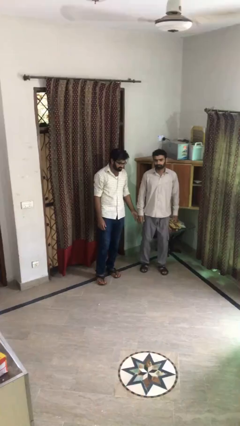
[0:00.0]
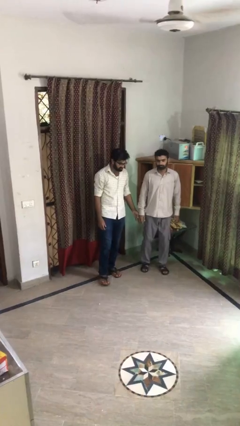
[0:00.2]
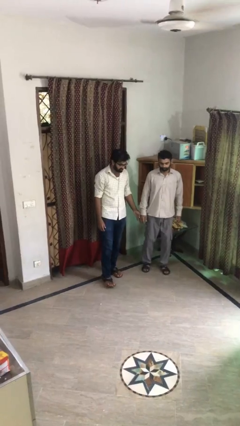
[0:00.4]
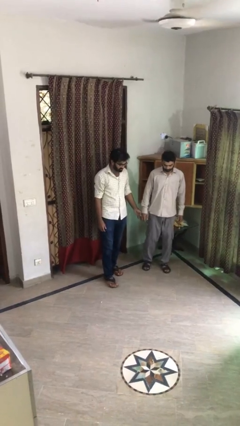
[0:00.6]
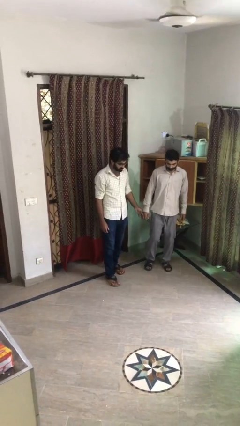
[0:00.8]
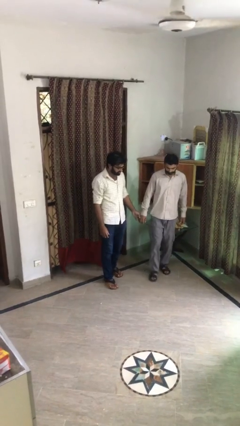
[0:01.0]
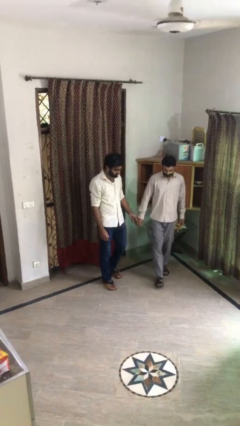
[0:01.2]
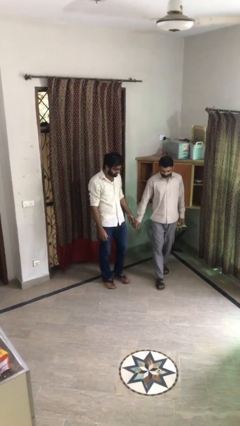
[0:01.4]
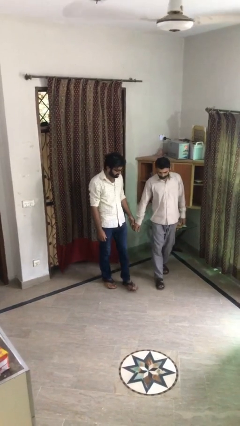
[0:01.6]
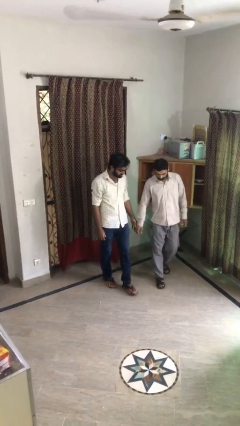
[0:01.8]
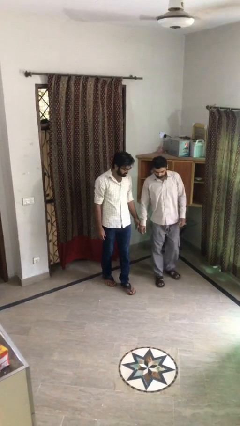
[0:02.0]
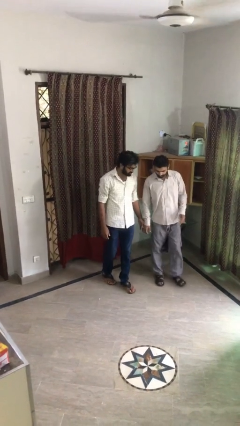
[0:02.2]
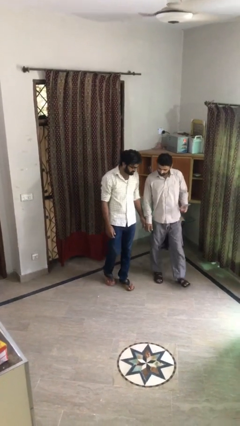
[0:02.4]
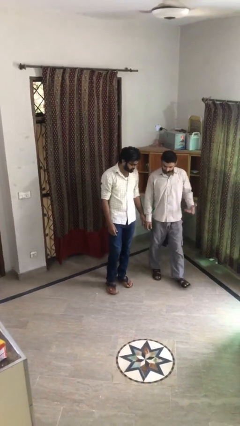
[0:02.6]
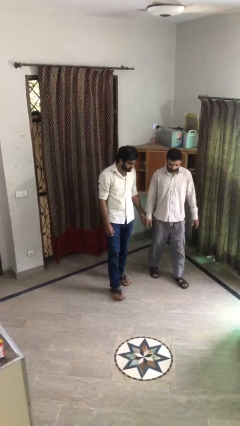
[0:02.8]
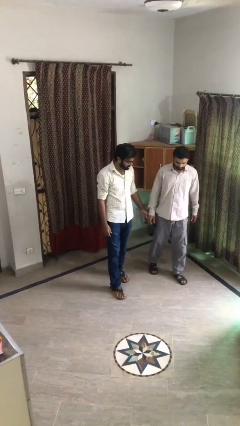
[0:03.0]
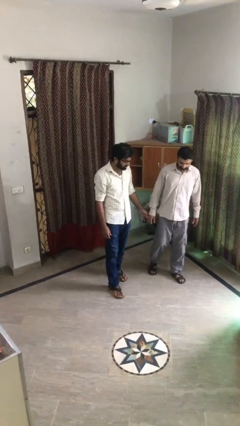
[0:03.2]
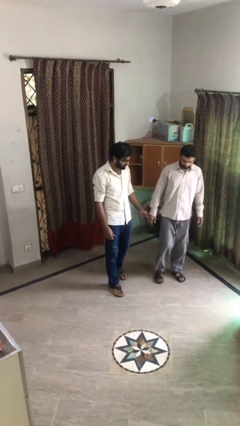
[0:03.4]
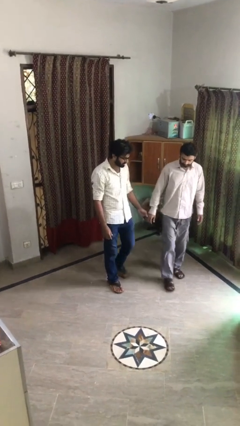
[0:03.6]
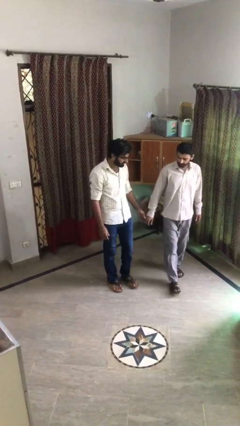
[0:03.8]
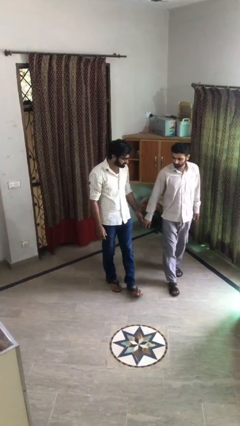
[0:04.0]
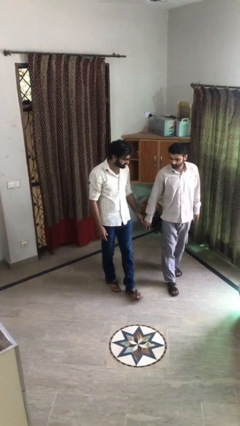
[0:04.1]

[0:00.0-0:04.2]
person holds hand

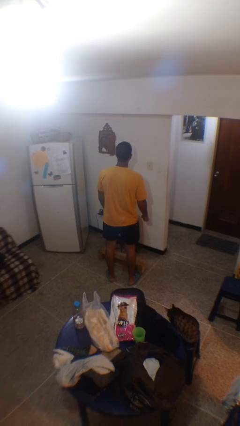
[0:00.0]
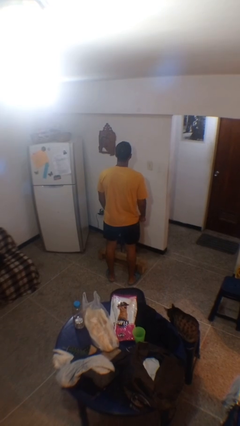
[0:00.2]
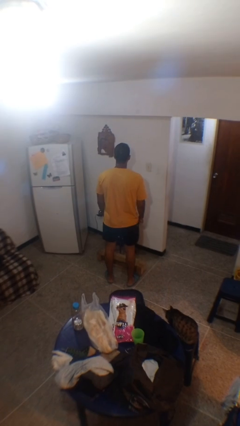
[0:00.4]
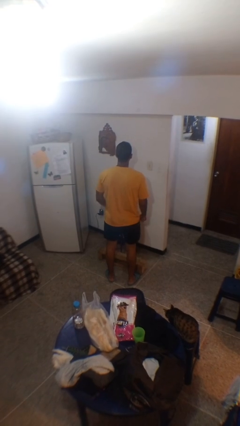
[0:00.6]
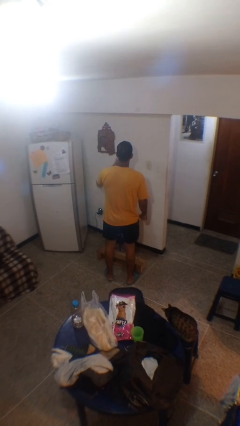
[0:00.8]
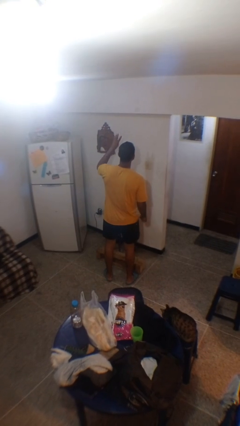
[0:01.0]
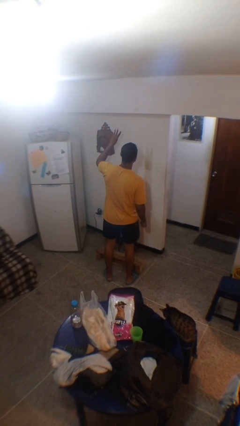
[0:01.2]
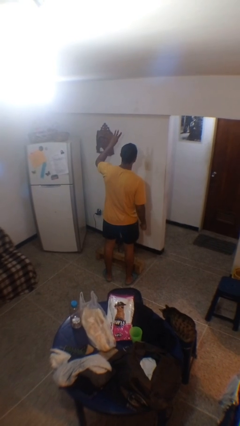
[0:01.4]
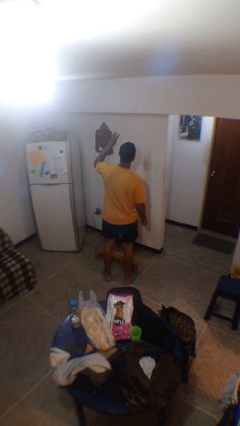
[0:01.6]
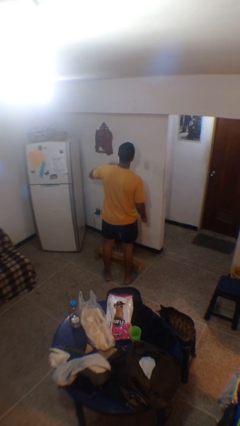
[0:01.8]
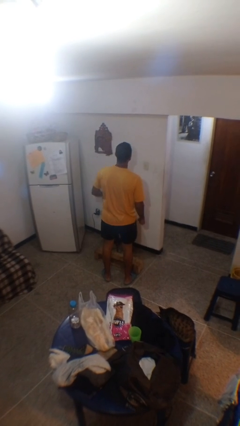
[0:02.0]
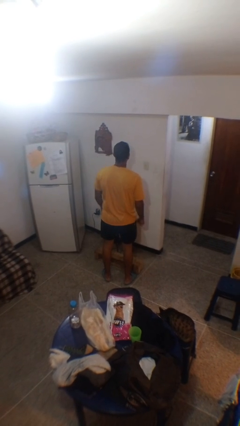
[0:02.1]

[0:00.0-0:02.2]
person gestures number three

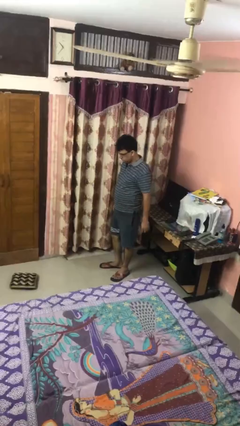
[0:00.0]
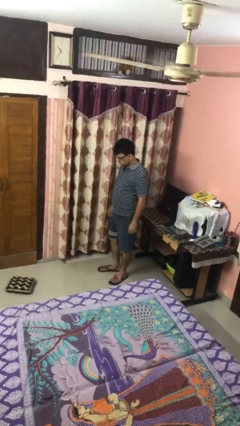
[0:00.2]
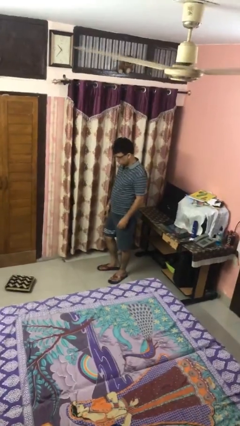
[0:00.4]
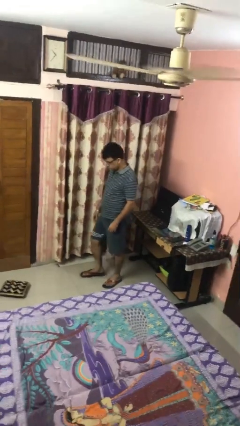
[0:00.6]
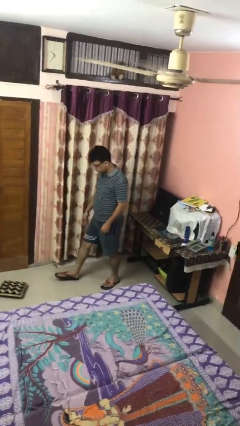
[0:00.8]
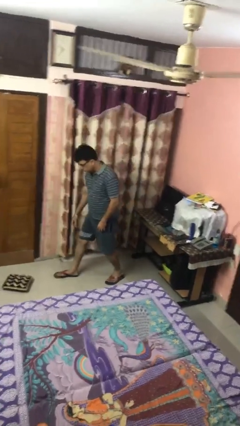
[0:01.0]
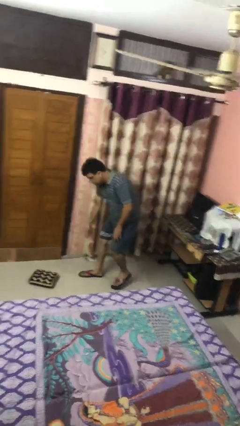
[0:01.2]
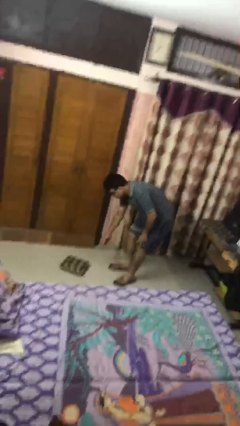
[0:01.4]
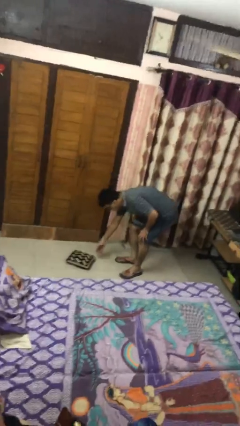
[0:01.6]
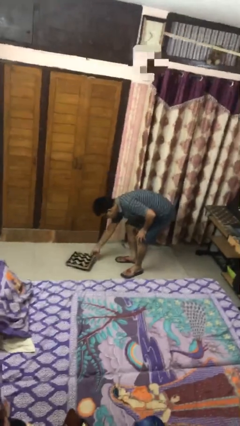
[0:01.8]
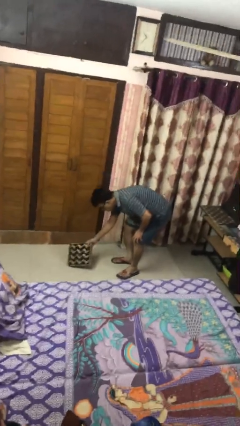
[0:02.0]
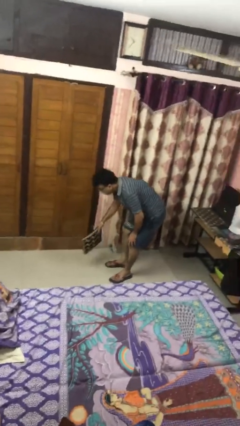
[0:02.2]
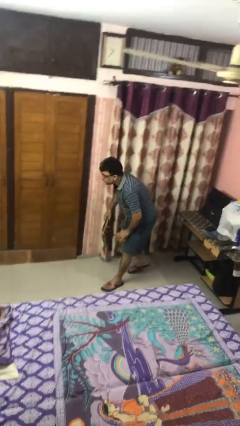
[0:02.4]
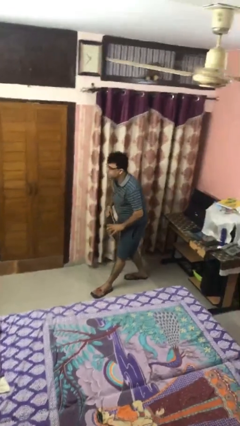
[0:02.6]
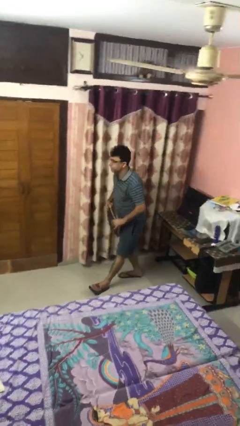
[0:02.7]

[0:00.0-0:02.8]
person picks up object from floor

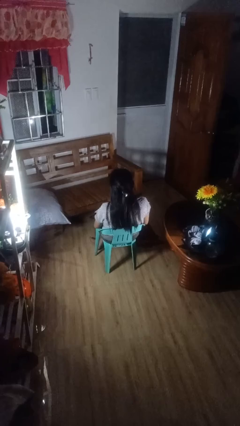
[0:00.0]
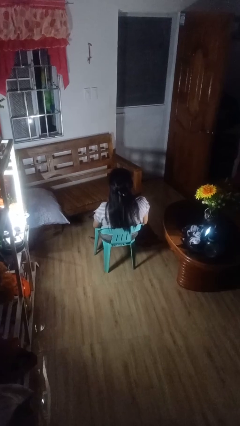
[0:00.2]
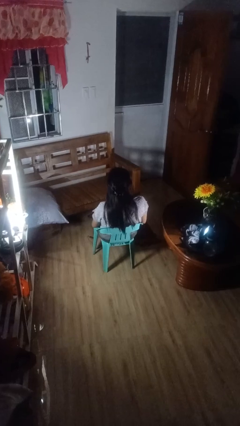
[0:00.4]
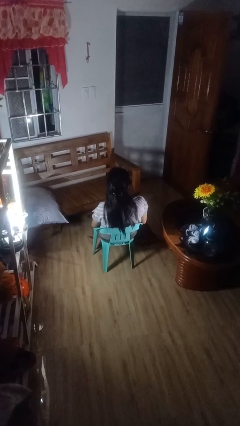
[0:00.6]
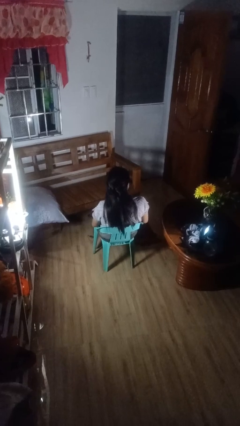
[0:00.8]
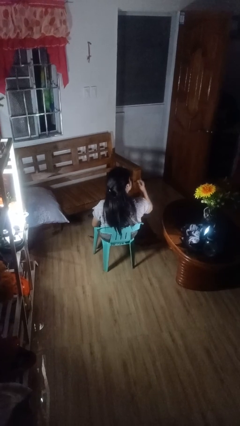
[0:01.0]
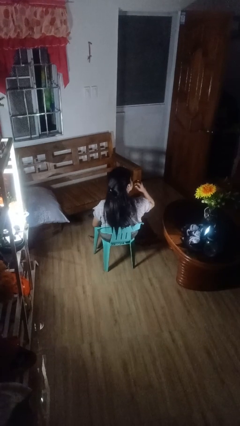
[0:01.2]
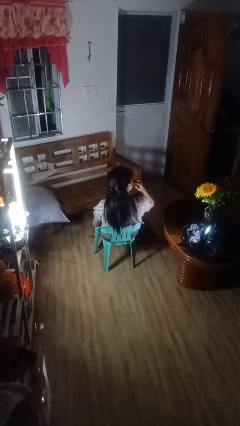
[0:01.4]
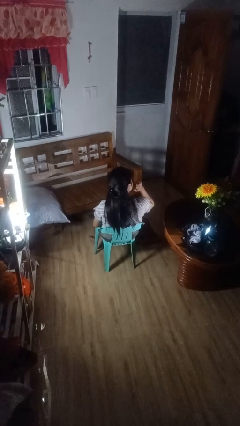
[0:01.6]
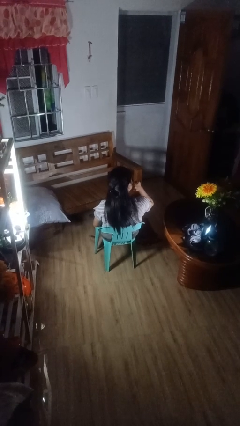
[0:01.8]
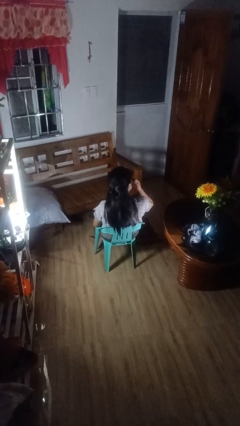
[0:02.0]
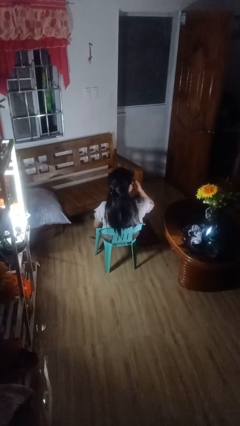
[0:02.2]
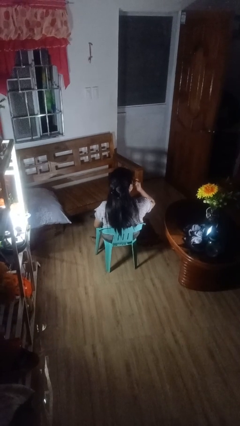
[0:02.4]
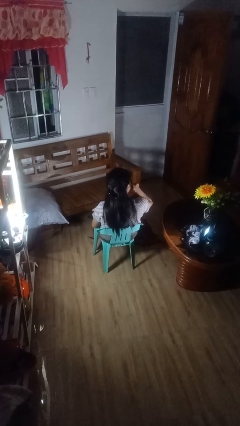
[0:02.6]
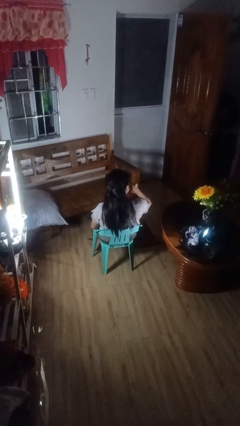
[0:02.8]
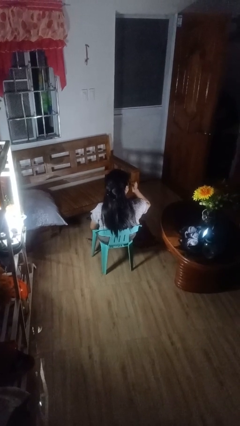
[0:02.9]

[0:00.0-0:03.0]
person licks fingers

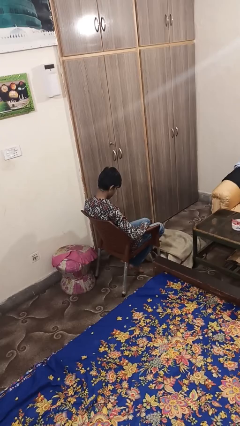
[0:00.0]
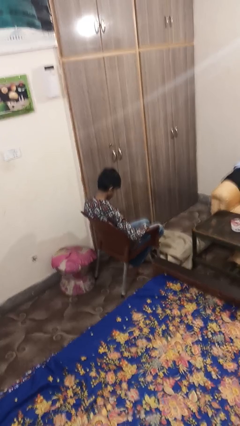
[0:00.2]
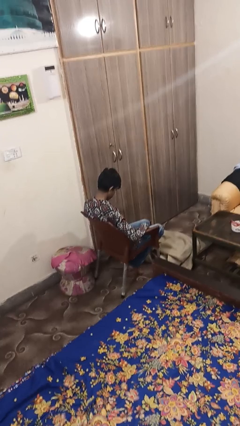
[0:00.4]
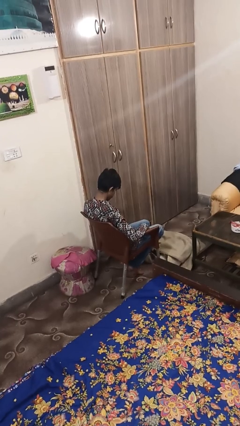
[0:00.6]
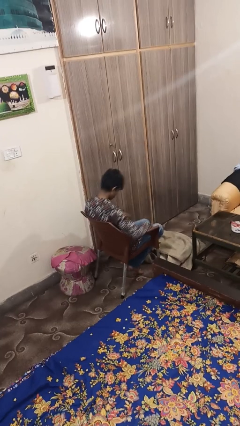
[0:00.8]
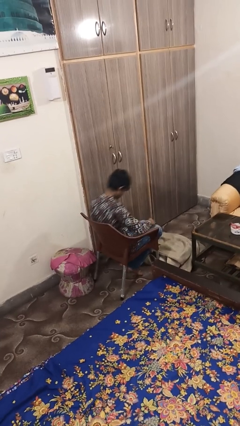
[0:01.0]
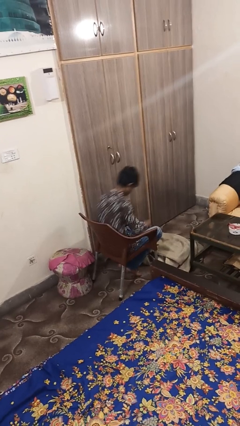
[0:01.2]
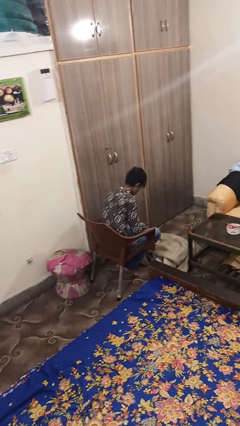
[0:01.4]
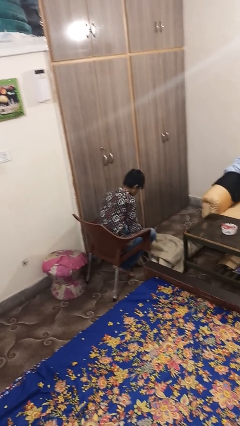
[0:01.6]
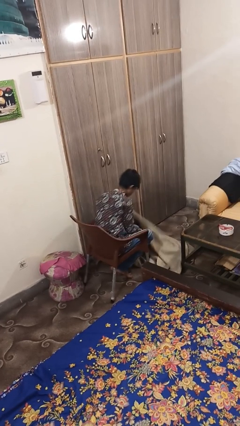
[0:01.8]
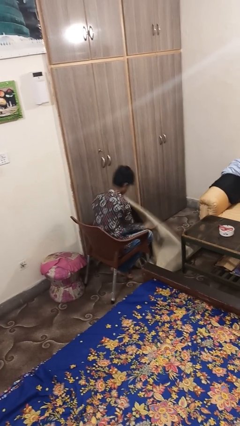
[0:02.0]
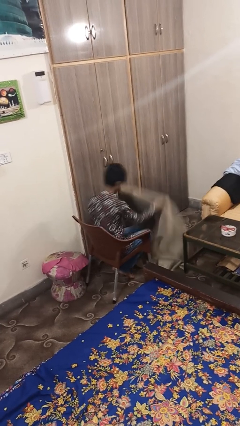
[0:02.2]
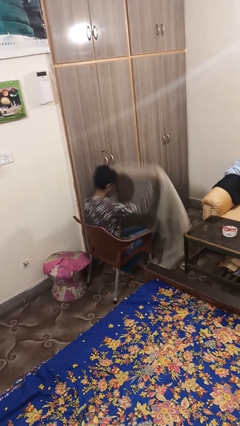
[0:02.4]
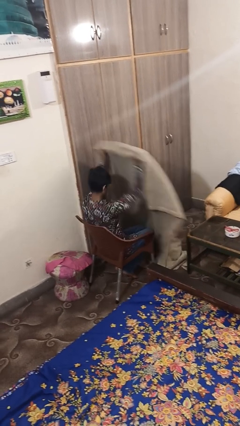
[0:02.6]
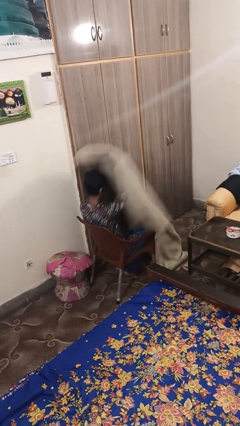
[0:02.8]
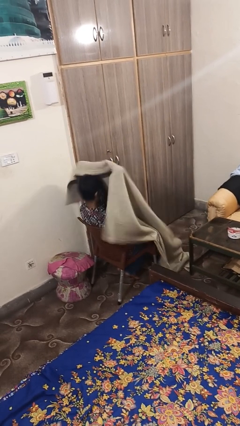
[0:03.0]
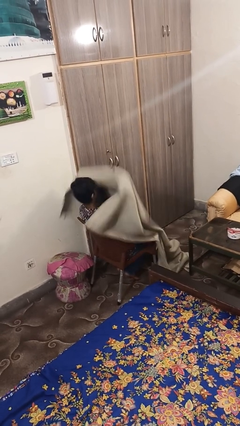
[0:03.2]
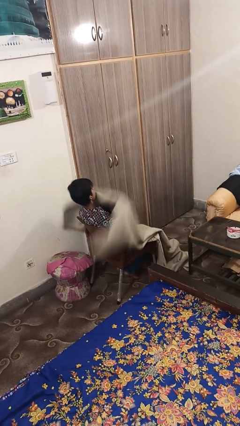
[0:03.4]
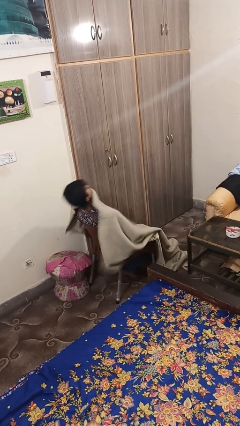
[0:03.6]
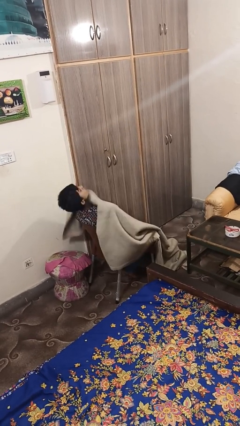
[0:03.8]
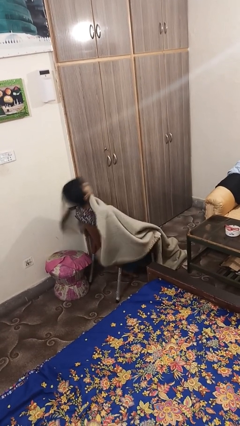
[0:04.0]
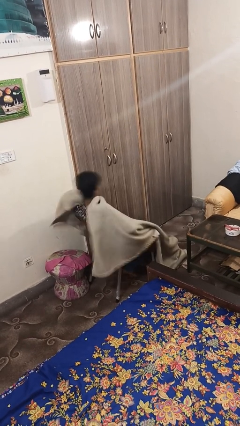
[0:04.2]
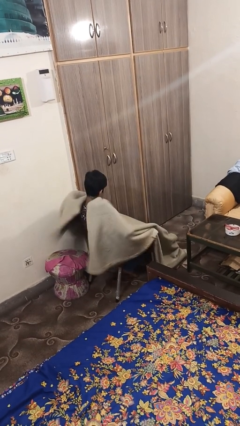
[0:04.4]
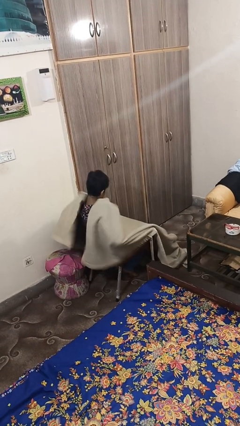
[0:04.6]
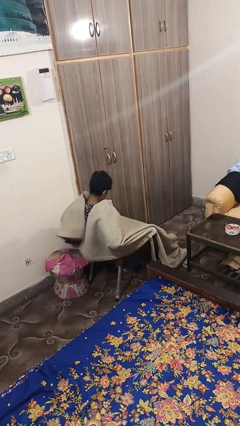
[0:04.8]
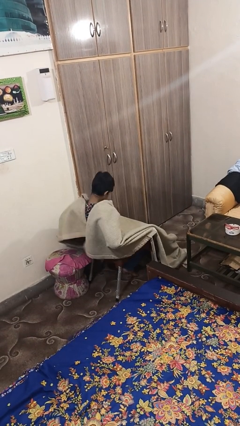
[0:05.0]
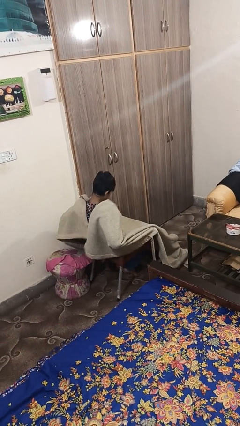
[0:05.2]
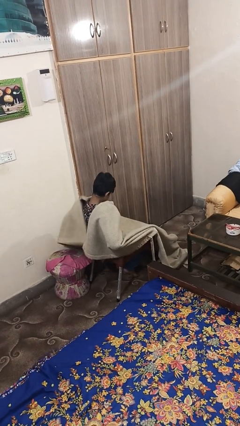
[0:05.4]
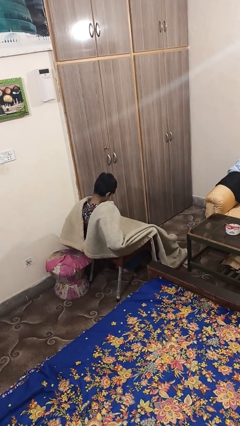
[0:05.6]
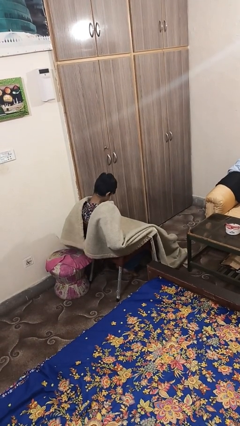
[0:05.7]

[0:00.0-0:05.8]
person covers with blanket
